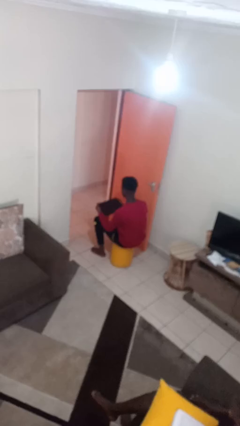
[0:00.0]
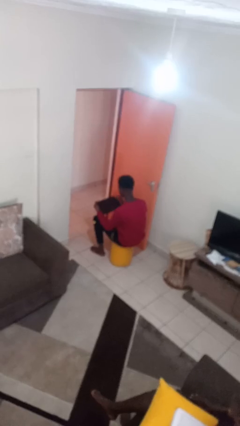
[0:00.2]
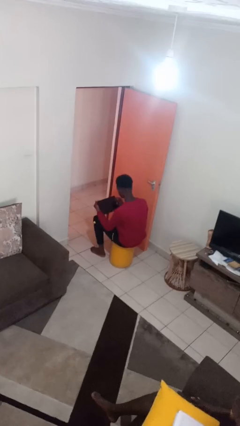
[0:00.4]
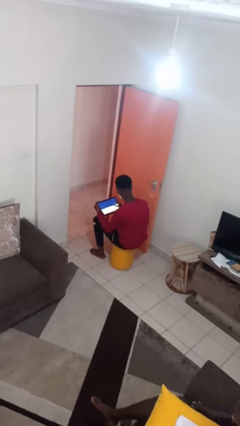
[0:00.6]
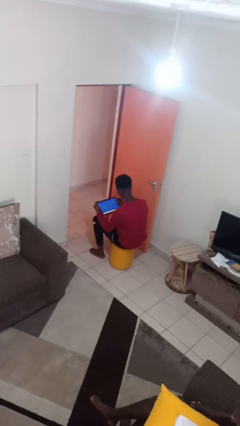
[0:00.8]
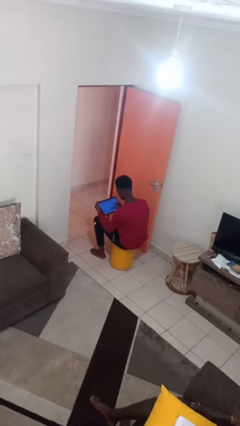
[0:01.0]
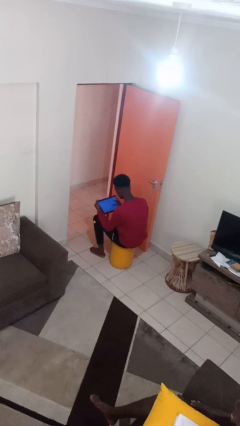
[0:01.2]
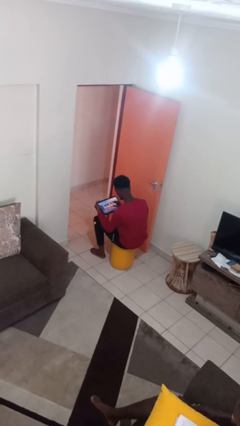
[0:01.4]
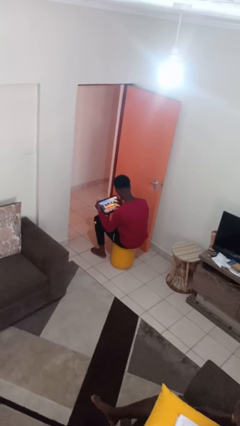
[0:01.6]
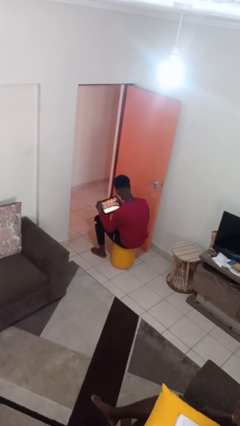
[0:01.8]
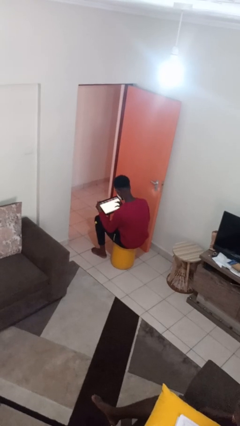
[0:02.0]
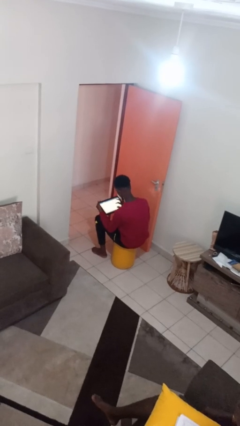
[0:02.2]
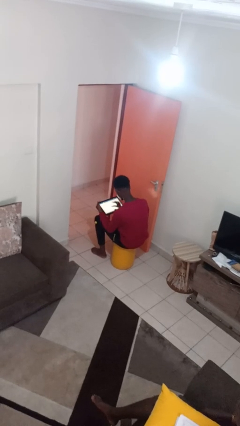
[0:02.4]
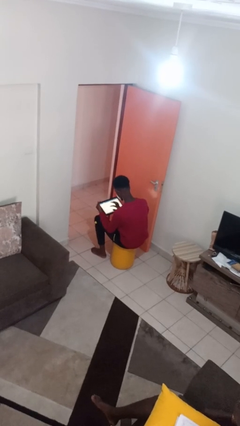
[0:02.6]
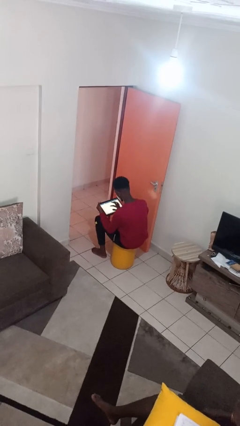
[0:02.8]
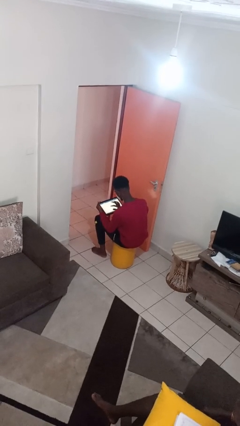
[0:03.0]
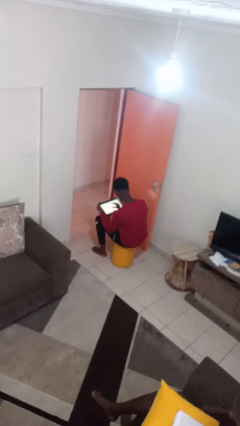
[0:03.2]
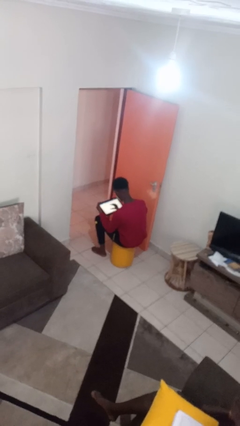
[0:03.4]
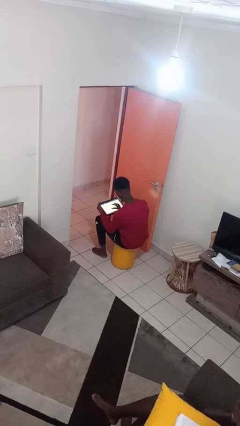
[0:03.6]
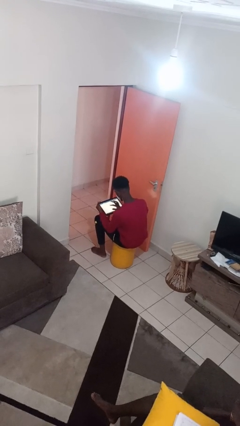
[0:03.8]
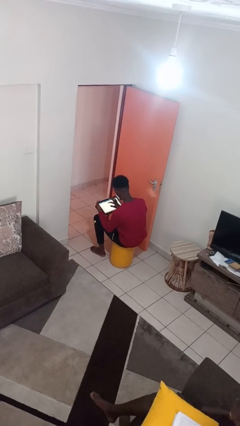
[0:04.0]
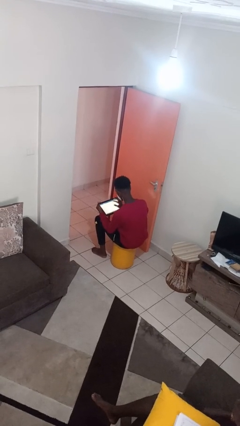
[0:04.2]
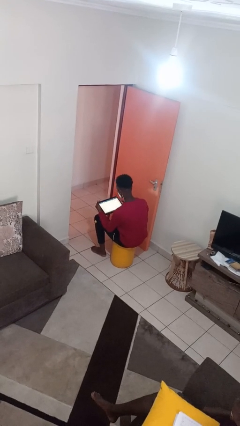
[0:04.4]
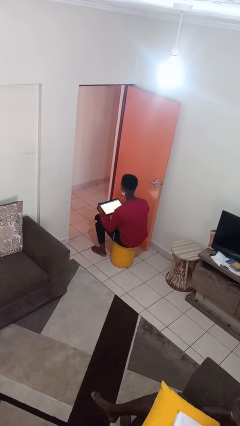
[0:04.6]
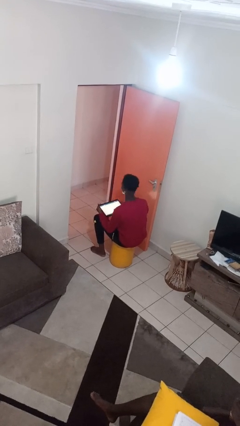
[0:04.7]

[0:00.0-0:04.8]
person interacts with tablet

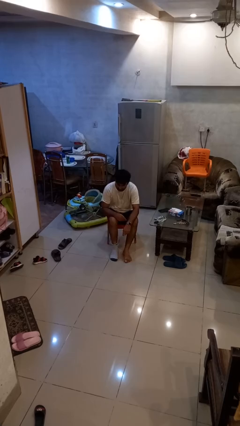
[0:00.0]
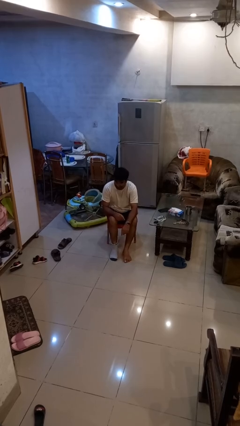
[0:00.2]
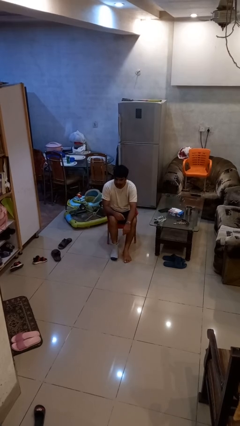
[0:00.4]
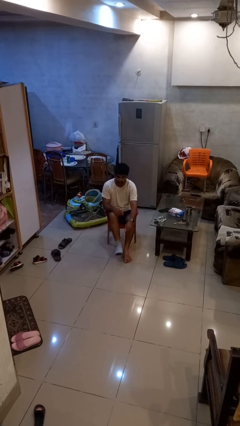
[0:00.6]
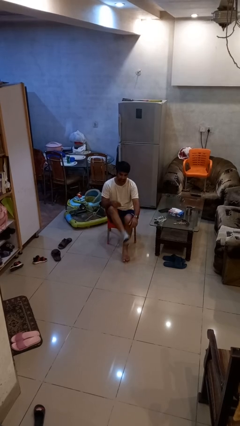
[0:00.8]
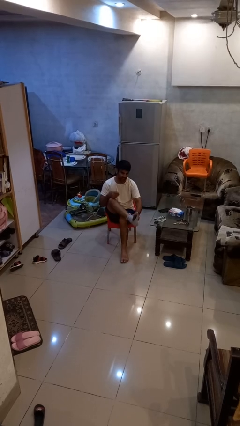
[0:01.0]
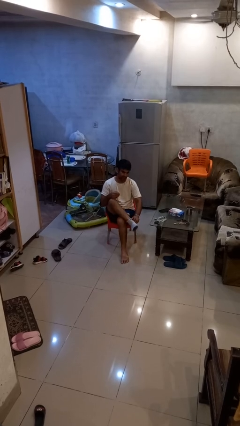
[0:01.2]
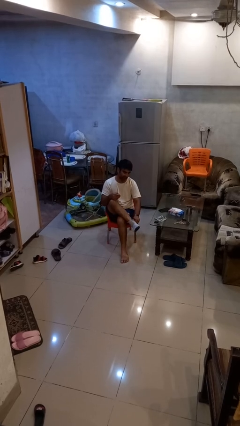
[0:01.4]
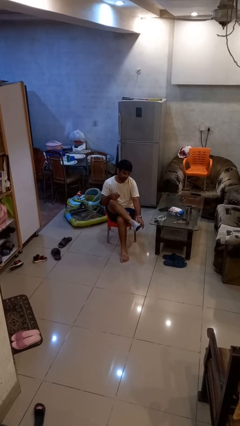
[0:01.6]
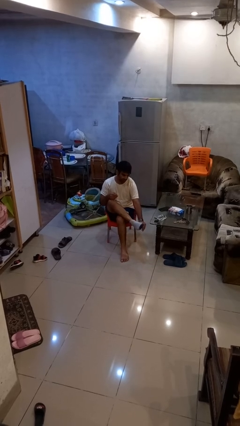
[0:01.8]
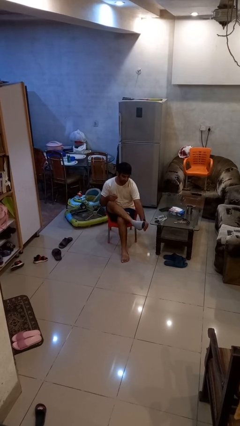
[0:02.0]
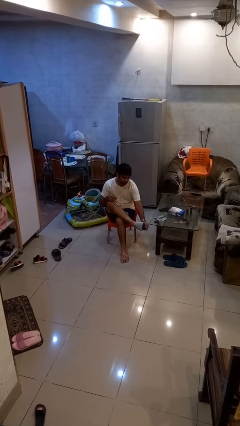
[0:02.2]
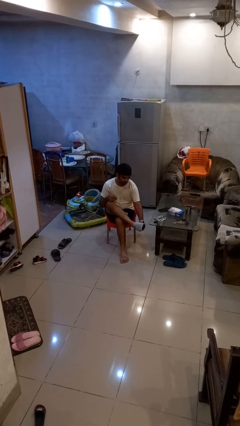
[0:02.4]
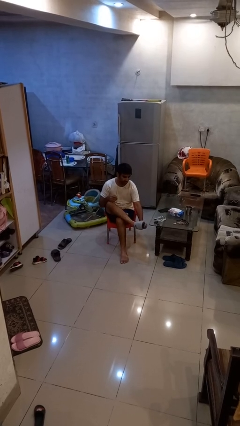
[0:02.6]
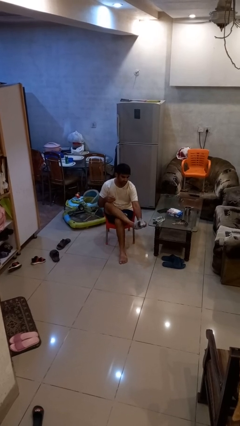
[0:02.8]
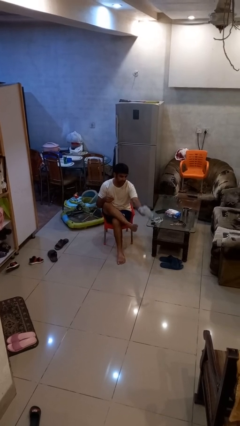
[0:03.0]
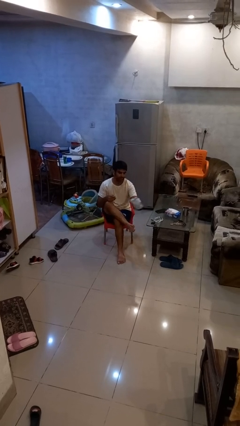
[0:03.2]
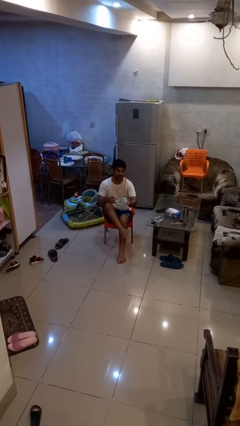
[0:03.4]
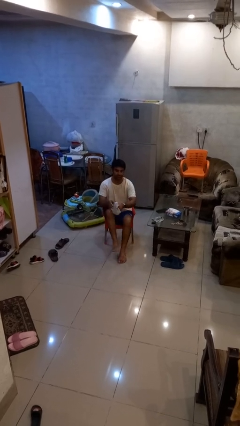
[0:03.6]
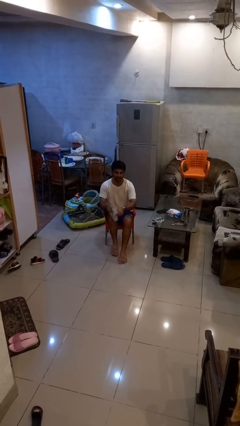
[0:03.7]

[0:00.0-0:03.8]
person takes off socks

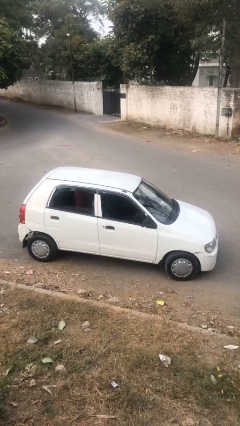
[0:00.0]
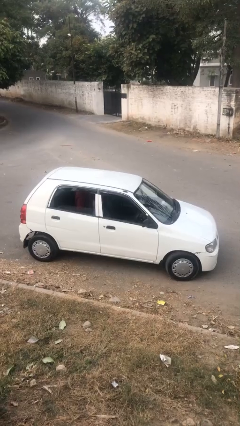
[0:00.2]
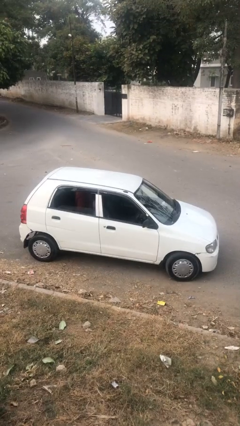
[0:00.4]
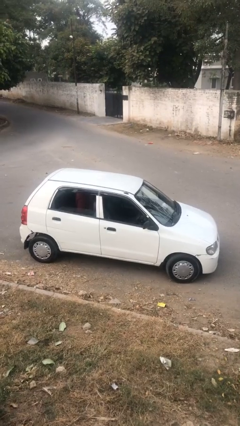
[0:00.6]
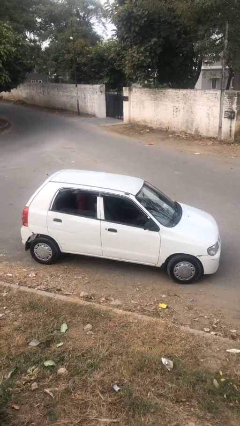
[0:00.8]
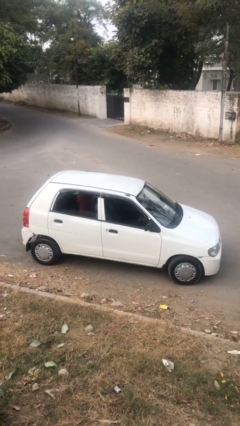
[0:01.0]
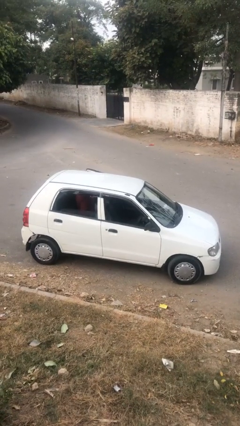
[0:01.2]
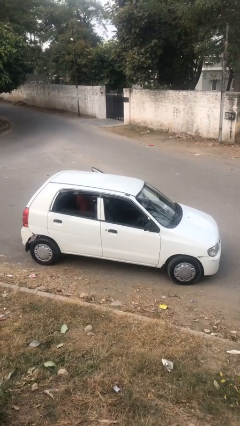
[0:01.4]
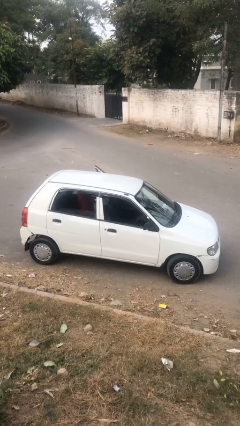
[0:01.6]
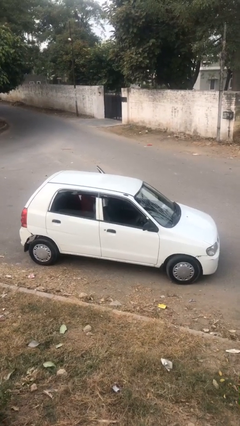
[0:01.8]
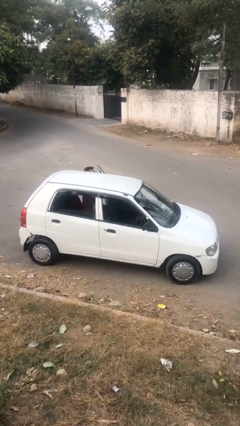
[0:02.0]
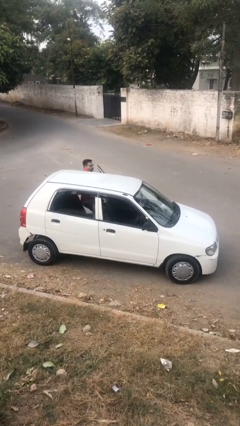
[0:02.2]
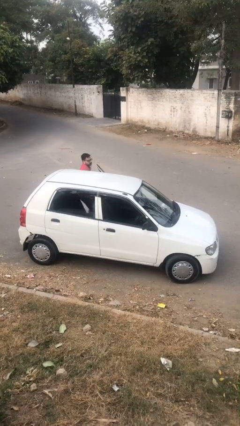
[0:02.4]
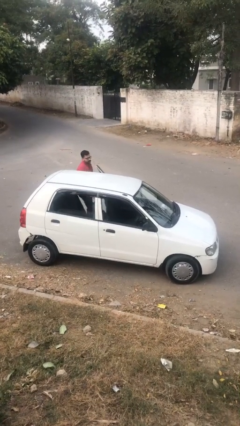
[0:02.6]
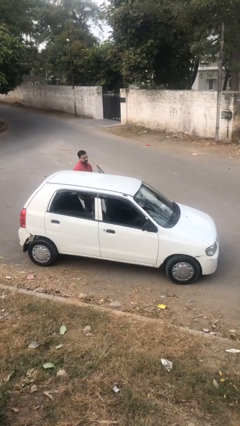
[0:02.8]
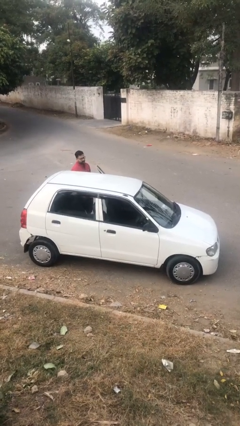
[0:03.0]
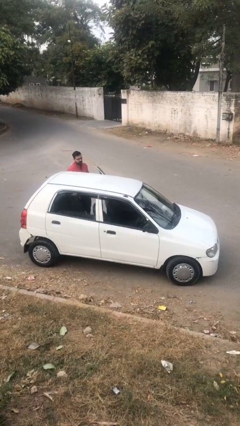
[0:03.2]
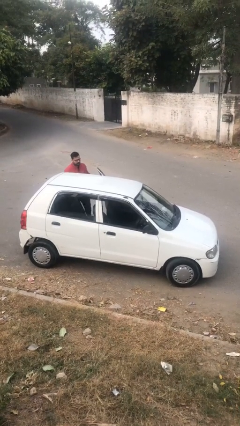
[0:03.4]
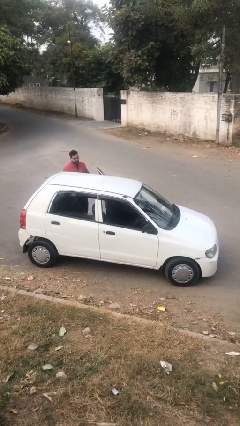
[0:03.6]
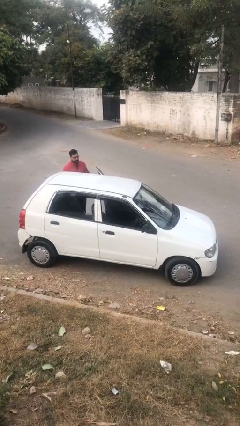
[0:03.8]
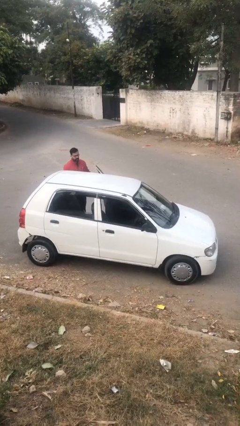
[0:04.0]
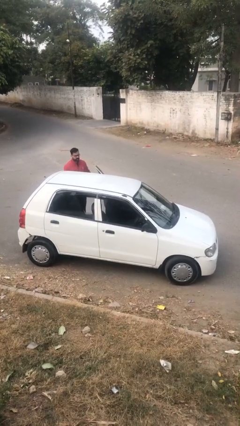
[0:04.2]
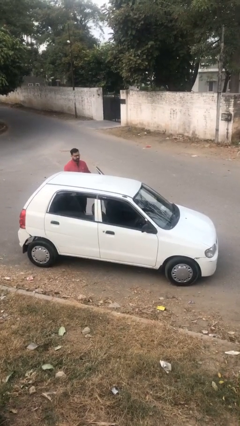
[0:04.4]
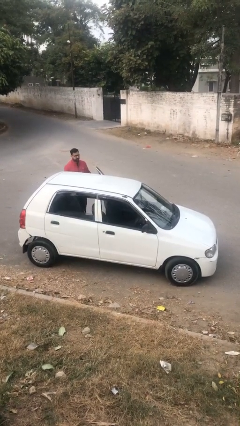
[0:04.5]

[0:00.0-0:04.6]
car drops off person

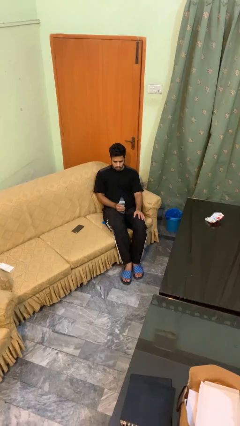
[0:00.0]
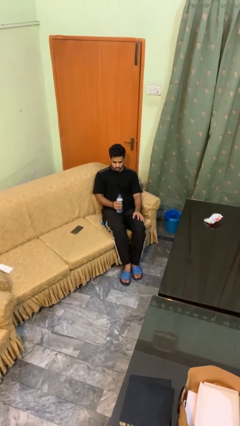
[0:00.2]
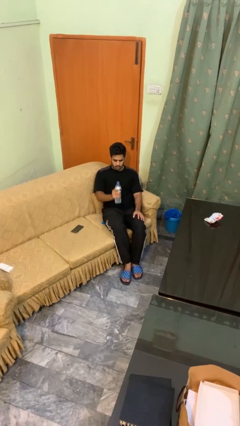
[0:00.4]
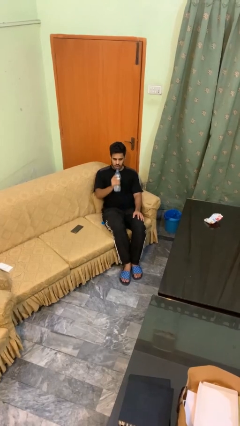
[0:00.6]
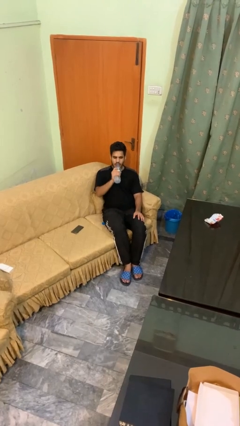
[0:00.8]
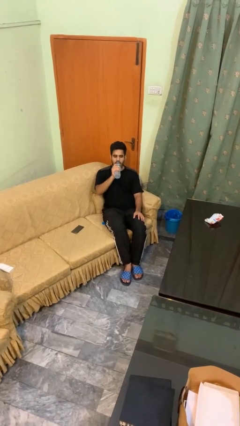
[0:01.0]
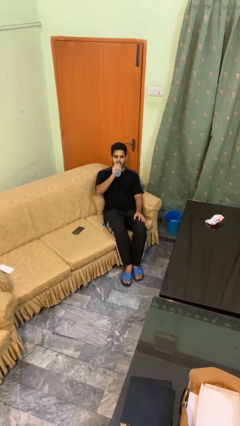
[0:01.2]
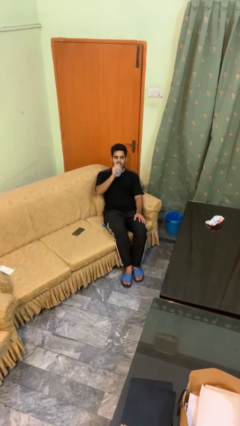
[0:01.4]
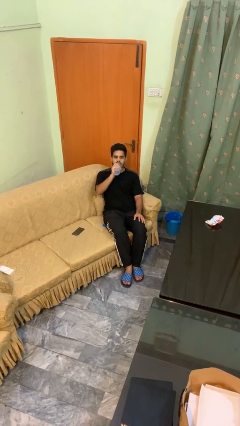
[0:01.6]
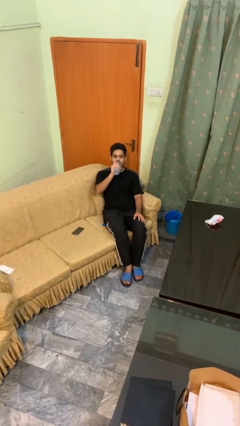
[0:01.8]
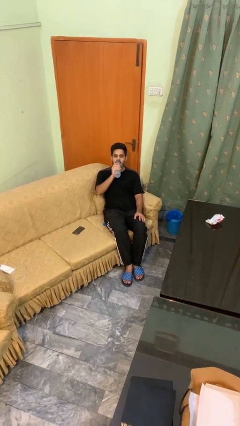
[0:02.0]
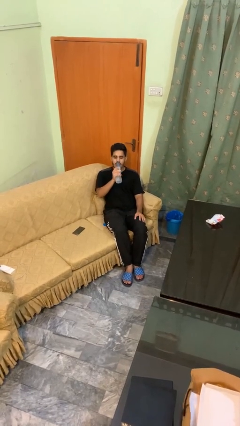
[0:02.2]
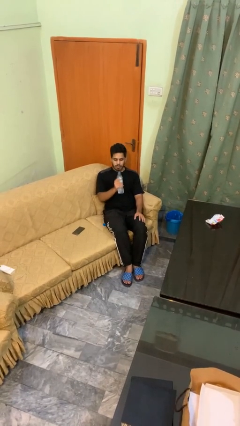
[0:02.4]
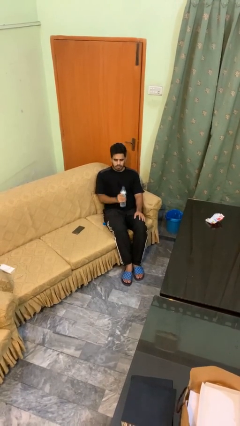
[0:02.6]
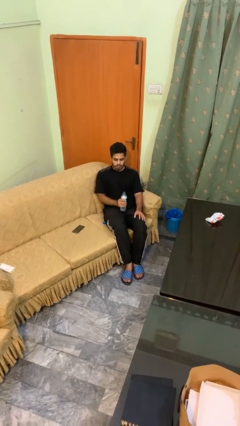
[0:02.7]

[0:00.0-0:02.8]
person drinks from bottle

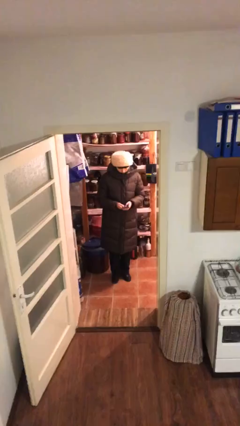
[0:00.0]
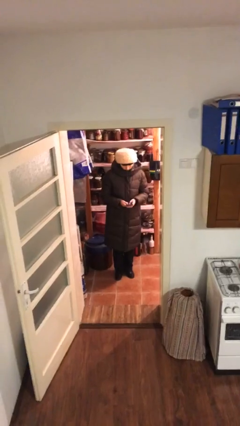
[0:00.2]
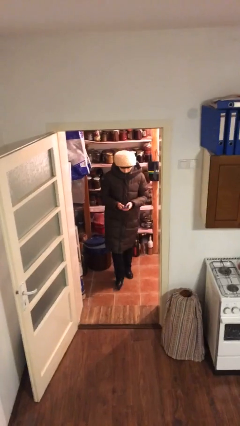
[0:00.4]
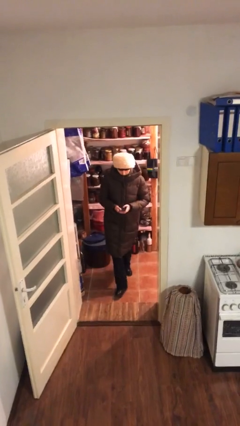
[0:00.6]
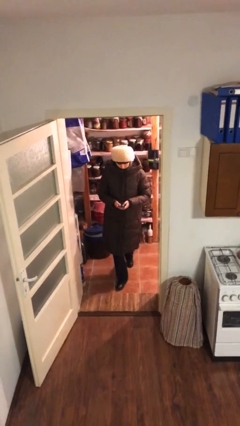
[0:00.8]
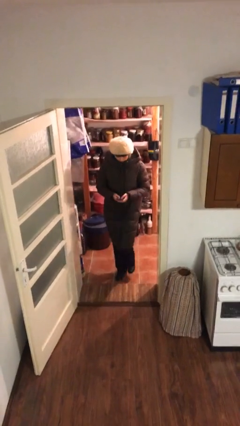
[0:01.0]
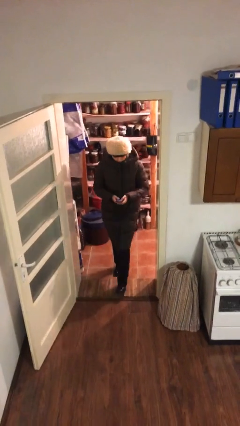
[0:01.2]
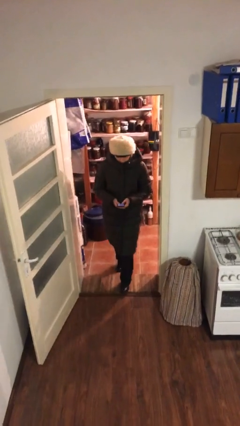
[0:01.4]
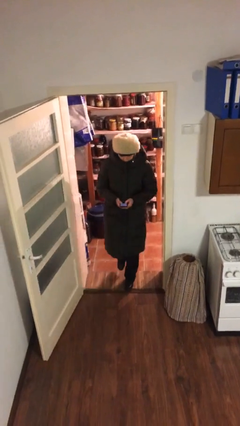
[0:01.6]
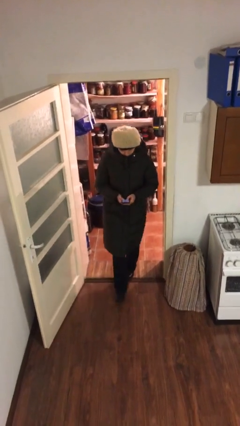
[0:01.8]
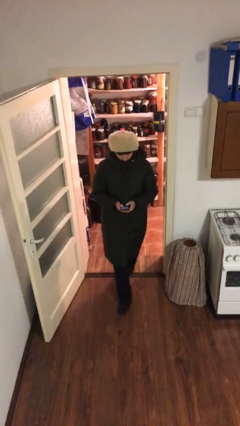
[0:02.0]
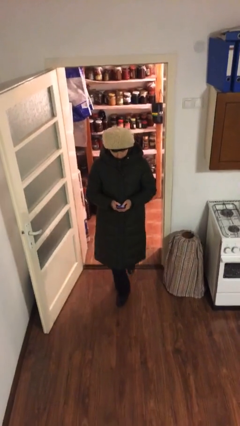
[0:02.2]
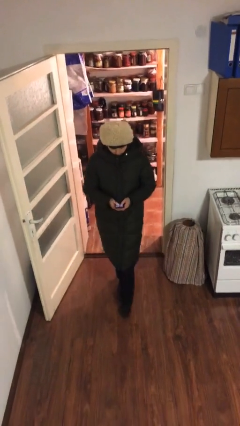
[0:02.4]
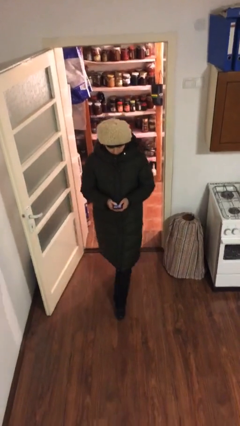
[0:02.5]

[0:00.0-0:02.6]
person enters scene through structure
